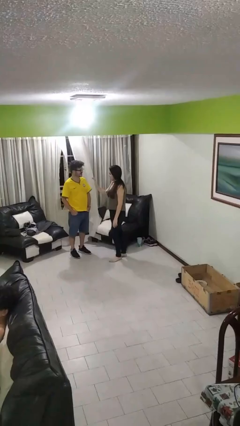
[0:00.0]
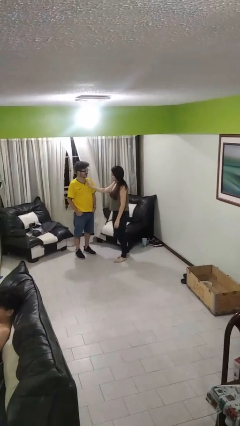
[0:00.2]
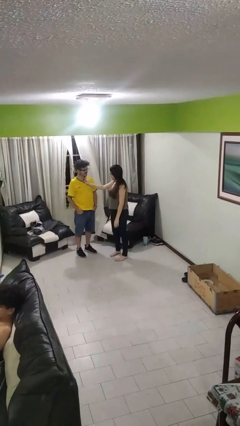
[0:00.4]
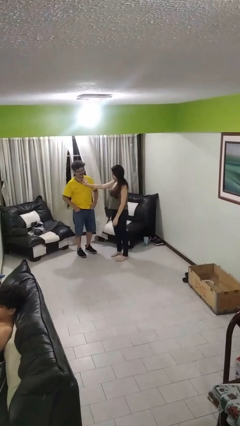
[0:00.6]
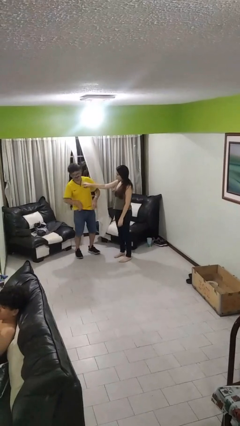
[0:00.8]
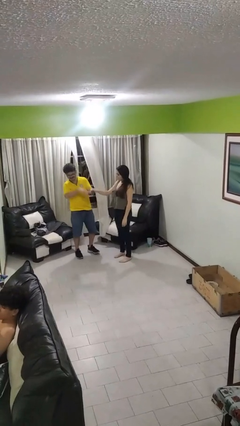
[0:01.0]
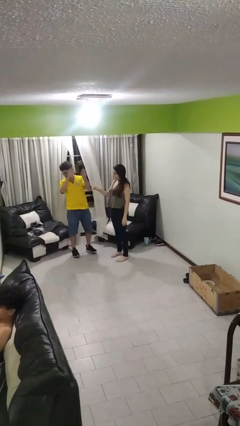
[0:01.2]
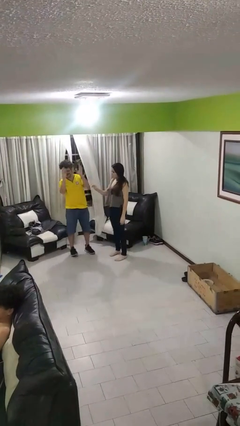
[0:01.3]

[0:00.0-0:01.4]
person shoves person

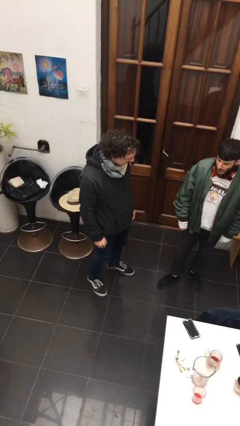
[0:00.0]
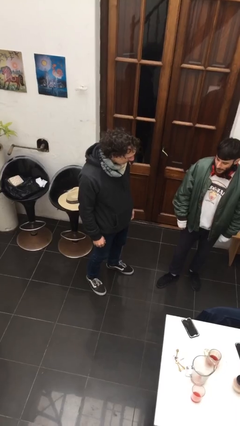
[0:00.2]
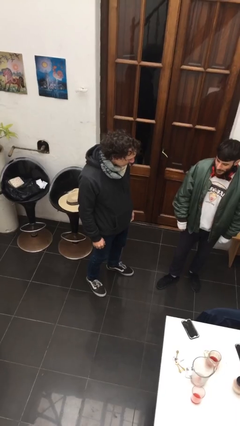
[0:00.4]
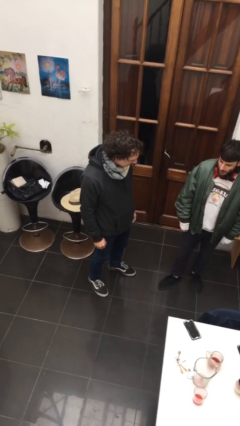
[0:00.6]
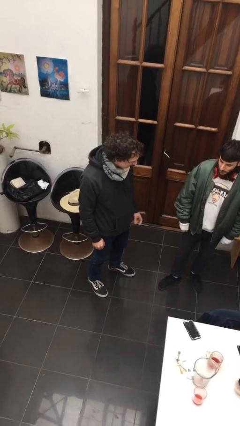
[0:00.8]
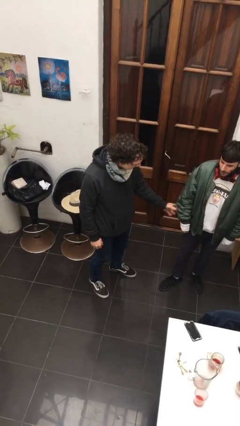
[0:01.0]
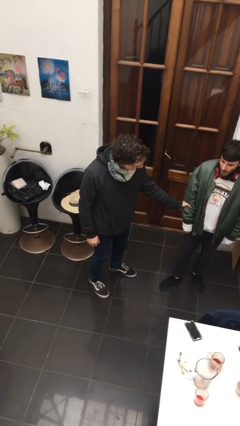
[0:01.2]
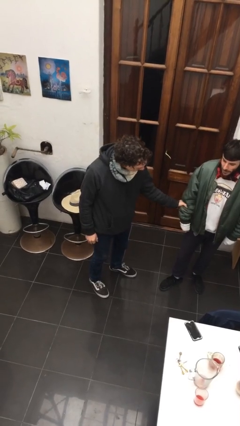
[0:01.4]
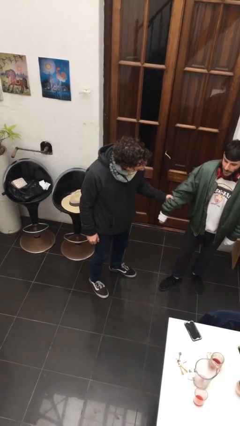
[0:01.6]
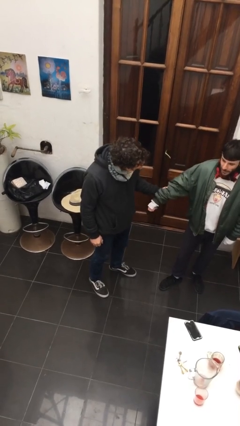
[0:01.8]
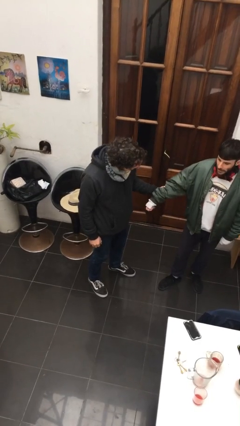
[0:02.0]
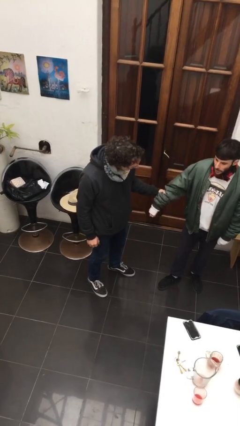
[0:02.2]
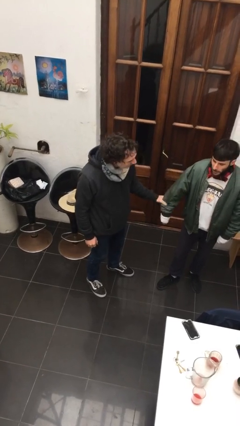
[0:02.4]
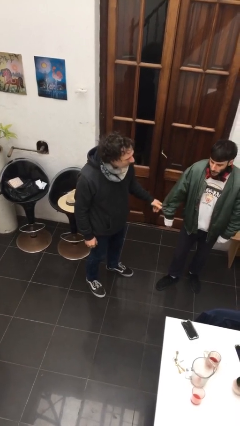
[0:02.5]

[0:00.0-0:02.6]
person grabs person by forearm

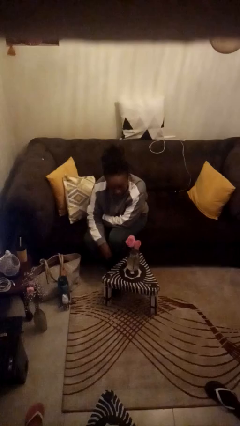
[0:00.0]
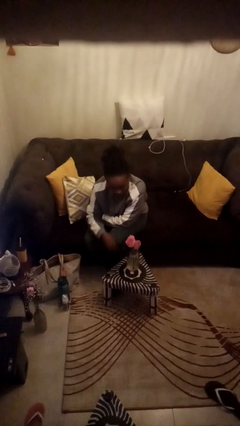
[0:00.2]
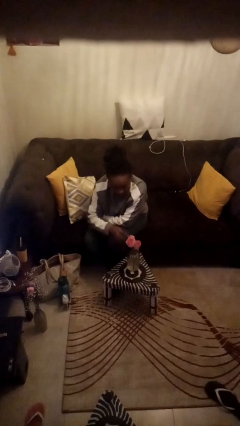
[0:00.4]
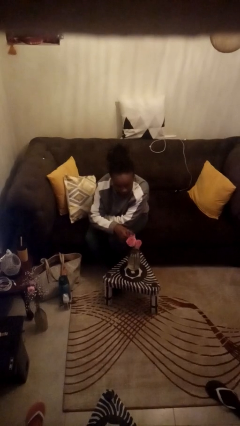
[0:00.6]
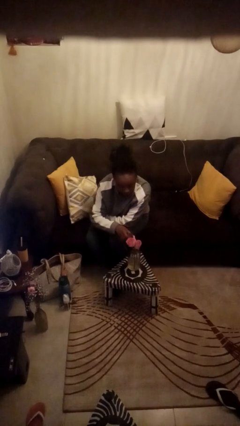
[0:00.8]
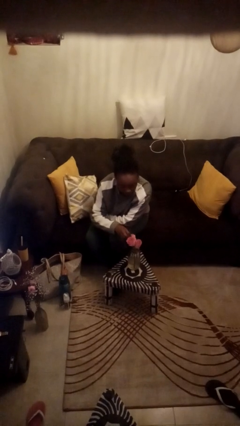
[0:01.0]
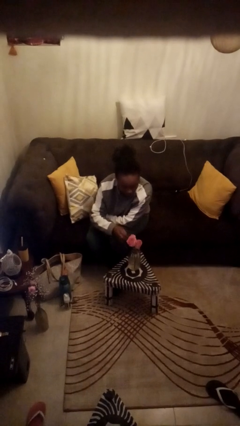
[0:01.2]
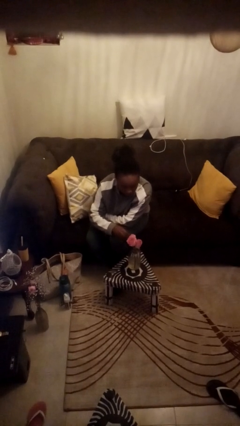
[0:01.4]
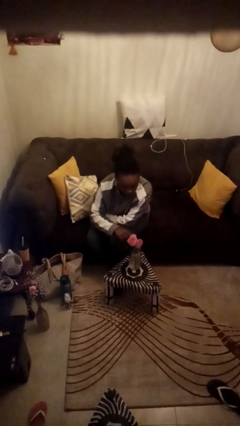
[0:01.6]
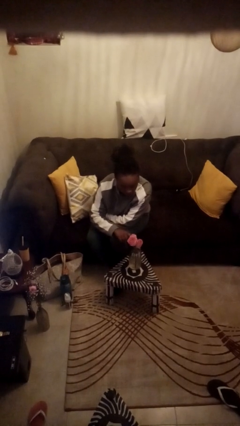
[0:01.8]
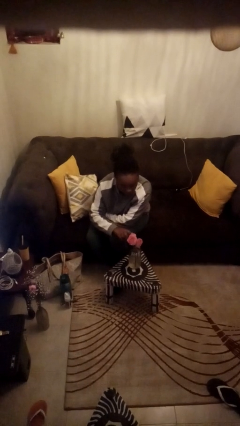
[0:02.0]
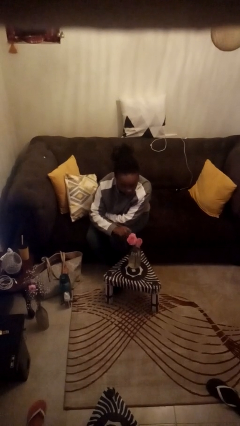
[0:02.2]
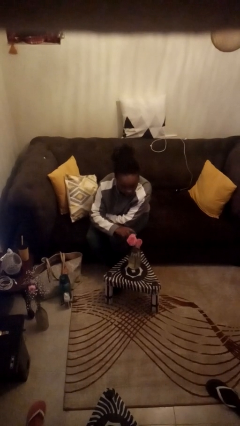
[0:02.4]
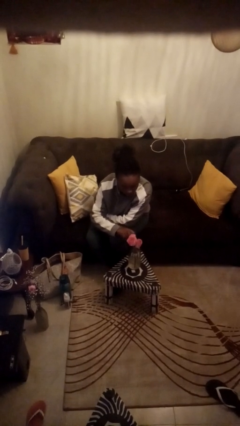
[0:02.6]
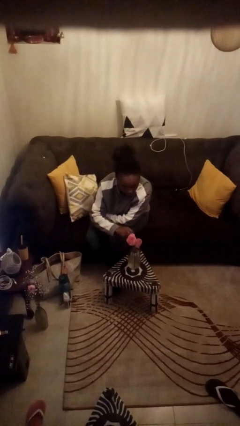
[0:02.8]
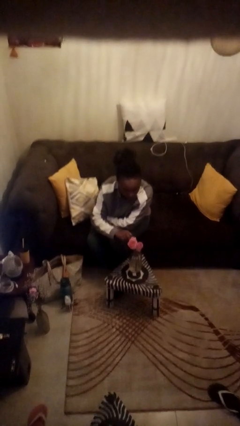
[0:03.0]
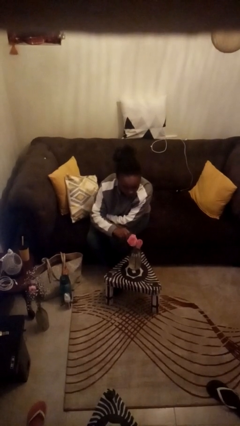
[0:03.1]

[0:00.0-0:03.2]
person arranges flowers in vase

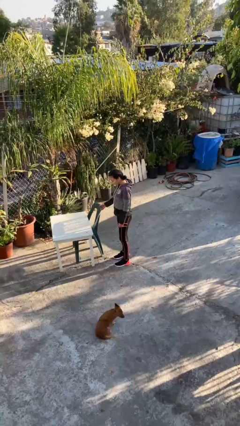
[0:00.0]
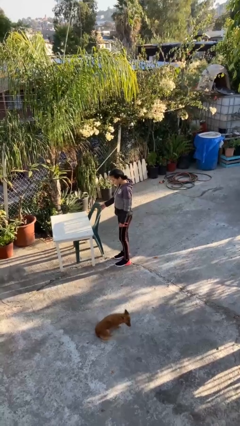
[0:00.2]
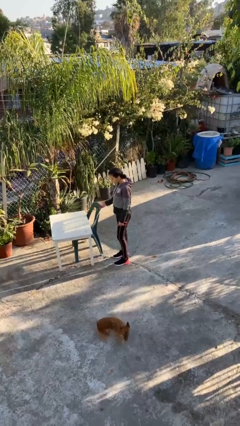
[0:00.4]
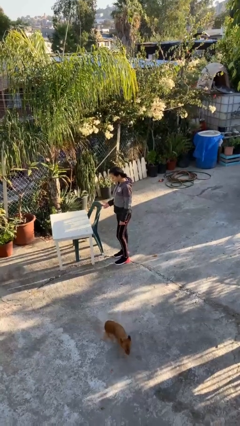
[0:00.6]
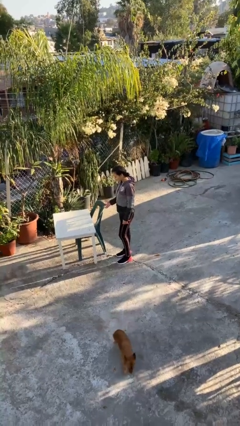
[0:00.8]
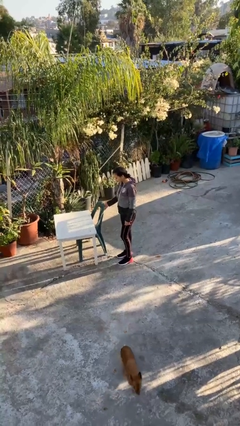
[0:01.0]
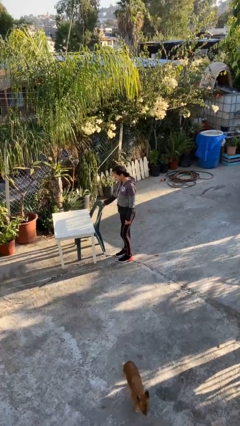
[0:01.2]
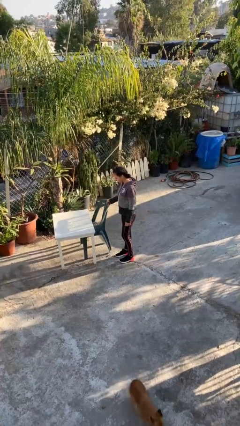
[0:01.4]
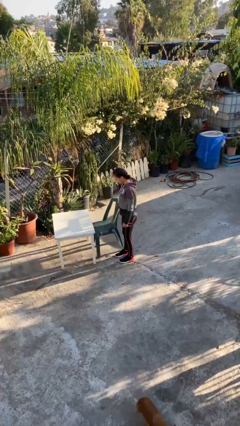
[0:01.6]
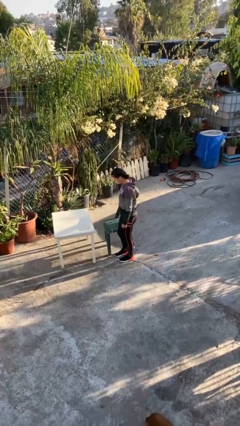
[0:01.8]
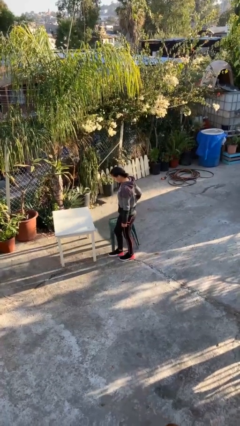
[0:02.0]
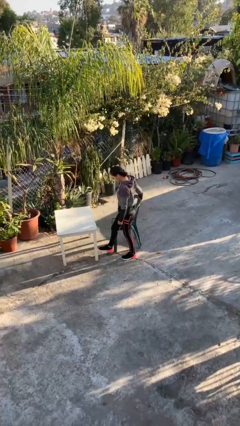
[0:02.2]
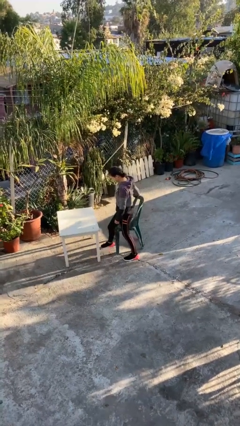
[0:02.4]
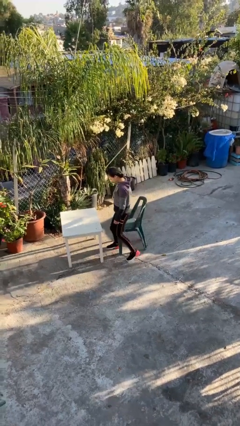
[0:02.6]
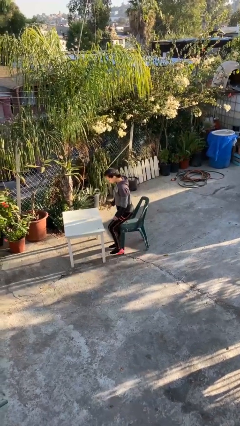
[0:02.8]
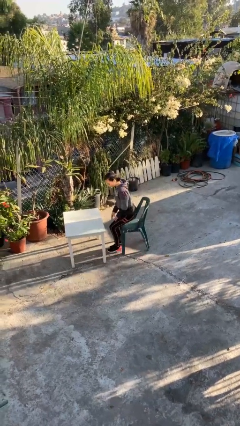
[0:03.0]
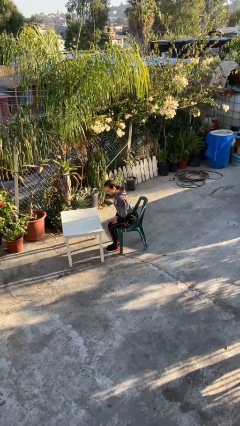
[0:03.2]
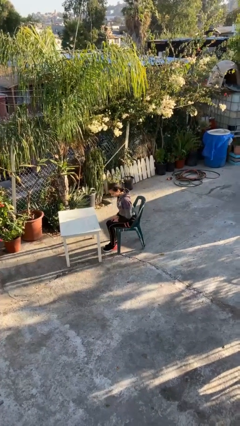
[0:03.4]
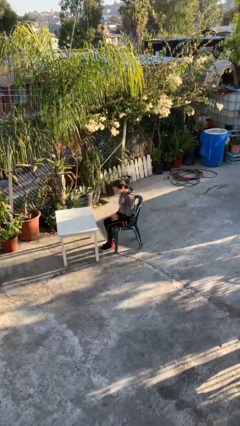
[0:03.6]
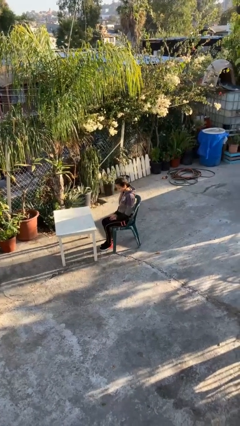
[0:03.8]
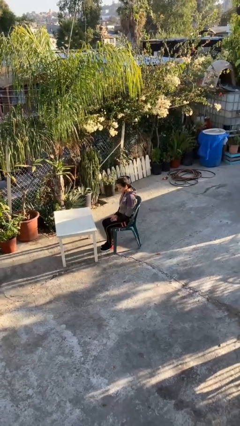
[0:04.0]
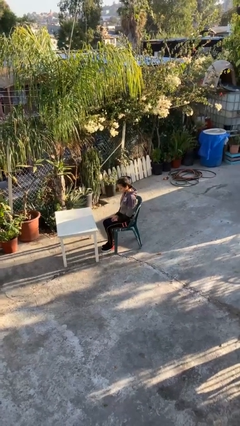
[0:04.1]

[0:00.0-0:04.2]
person sits down

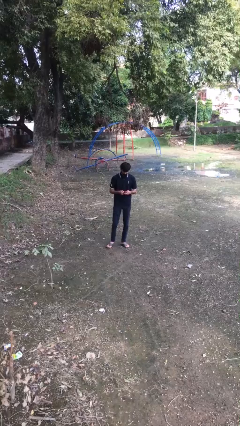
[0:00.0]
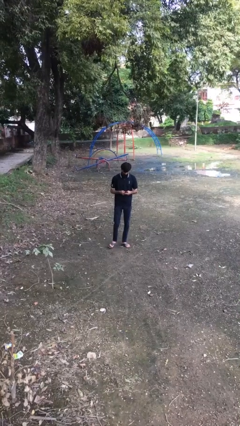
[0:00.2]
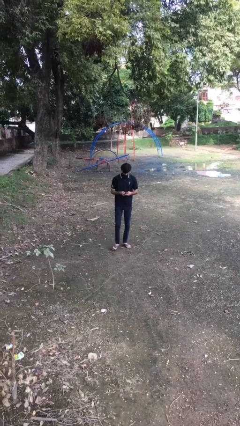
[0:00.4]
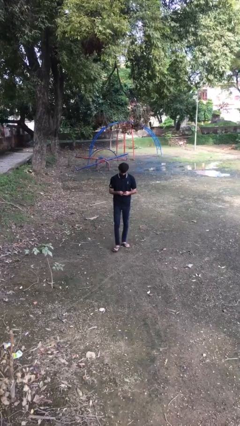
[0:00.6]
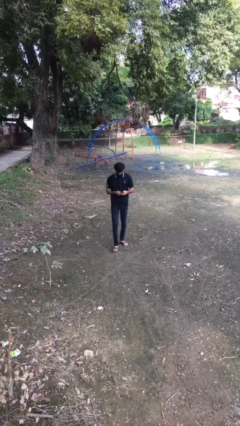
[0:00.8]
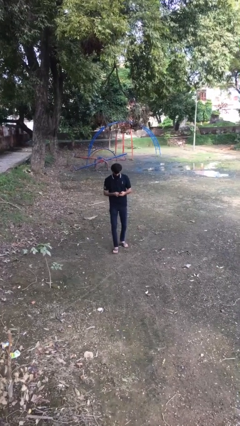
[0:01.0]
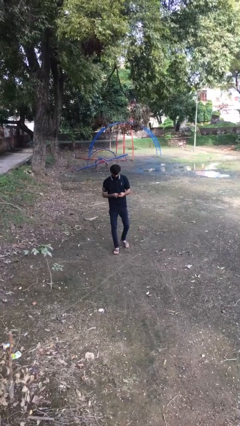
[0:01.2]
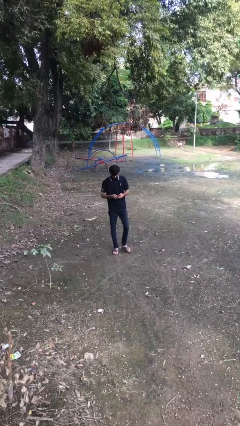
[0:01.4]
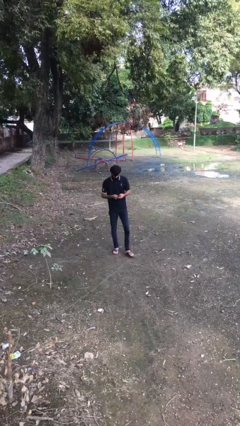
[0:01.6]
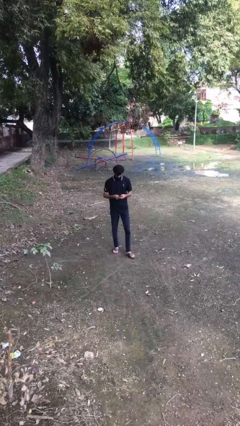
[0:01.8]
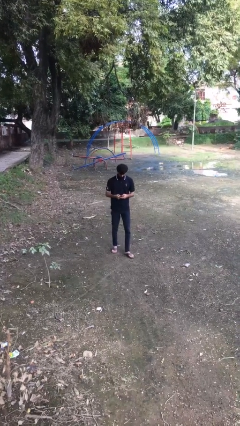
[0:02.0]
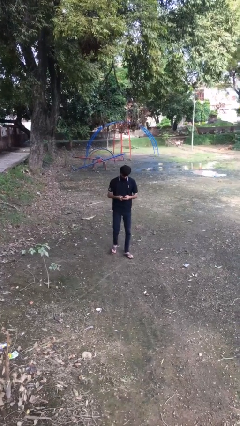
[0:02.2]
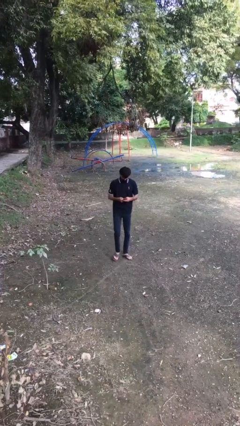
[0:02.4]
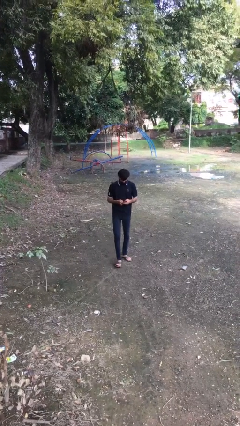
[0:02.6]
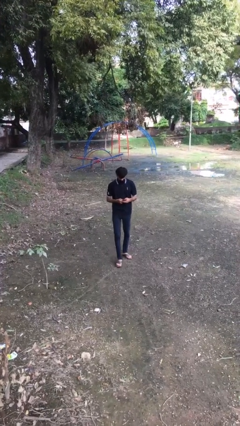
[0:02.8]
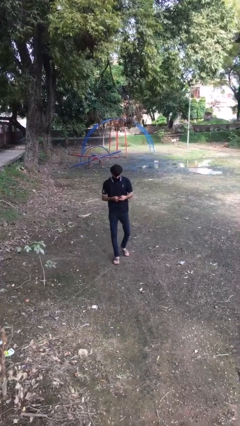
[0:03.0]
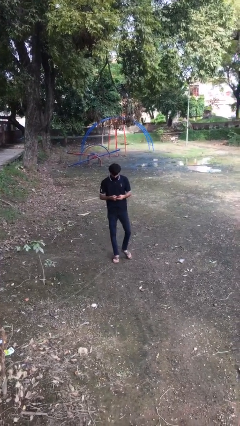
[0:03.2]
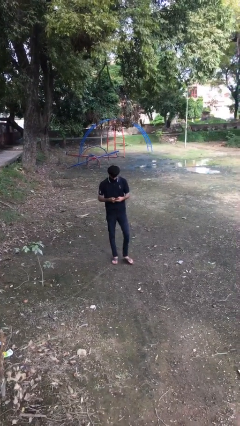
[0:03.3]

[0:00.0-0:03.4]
person texts on phone

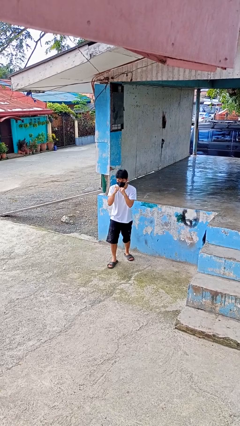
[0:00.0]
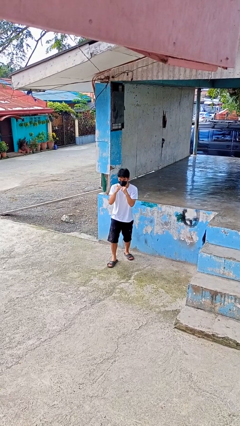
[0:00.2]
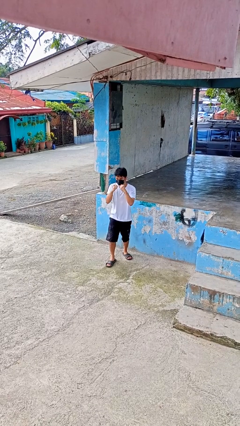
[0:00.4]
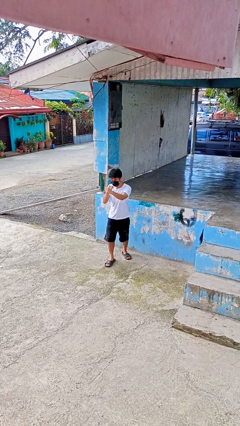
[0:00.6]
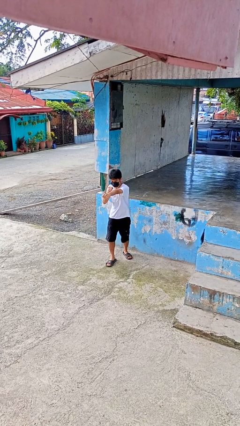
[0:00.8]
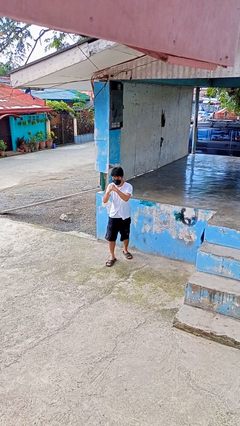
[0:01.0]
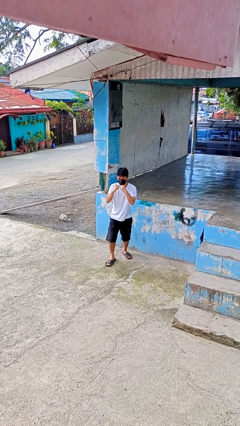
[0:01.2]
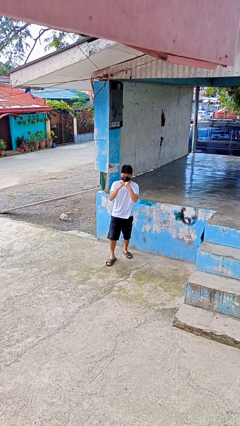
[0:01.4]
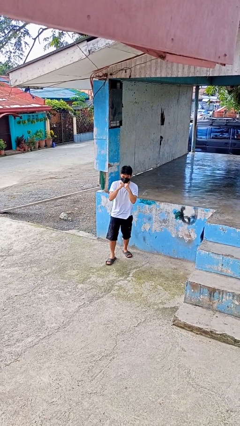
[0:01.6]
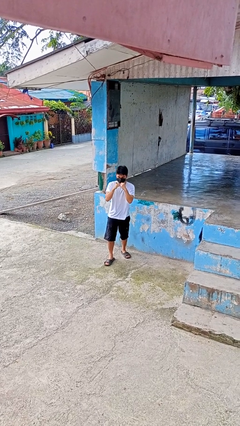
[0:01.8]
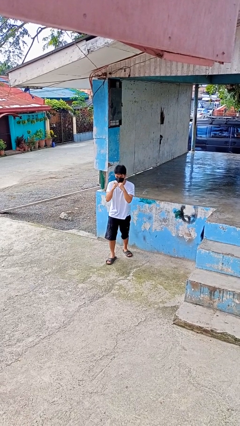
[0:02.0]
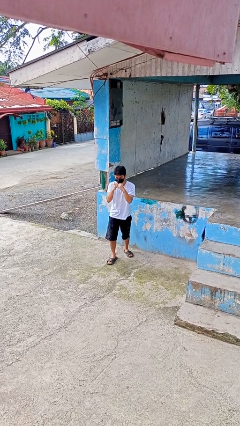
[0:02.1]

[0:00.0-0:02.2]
person punches

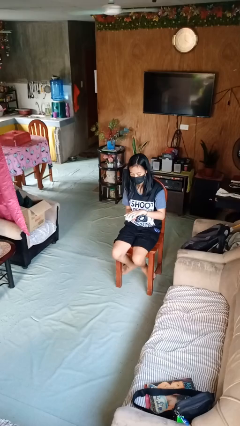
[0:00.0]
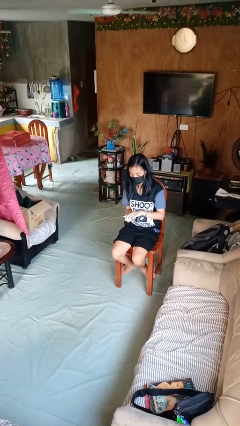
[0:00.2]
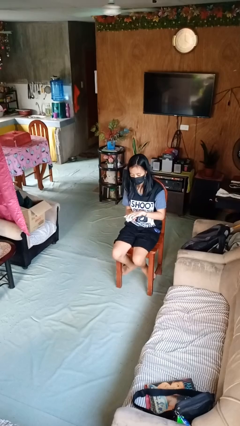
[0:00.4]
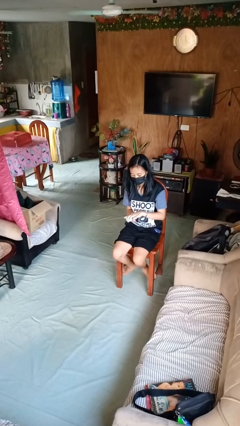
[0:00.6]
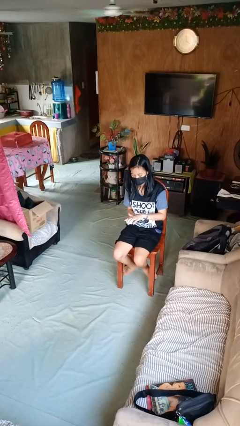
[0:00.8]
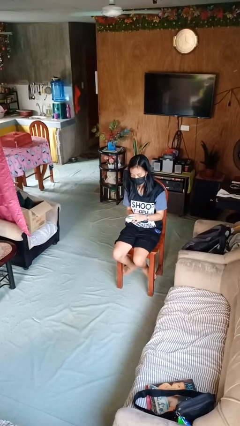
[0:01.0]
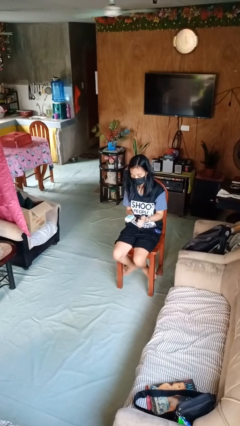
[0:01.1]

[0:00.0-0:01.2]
person closes jewelry box
